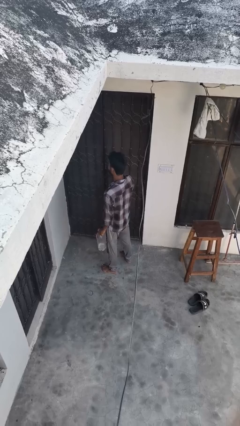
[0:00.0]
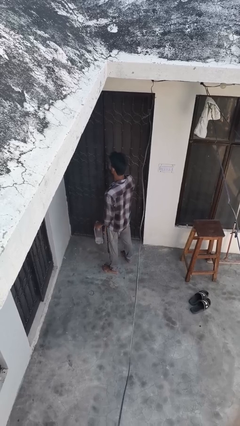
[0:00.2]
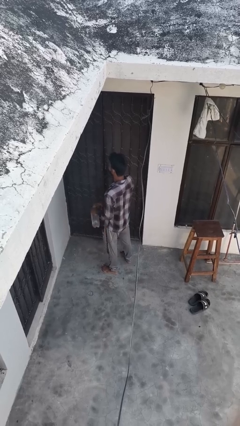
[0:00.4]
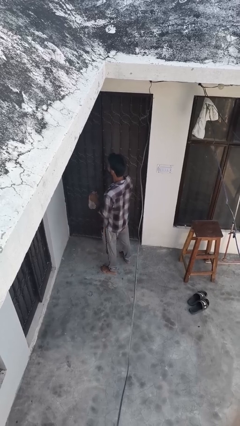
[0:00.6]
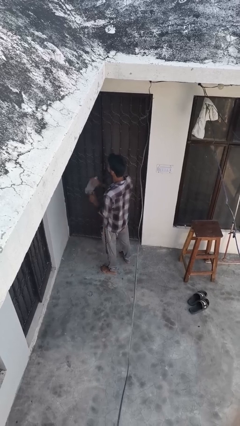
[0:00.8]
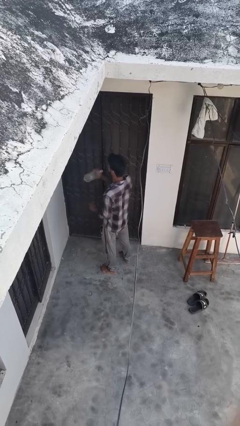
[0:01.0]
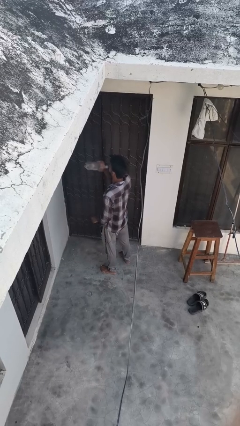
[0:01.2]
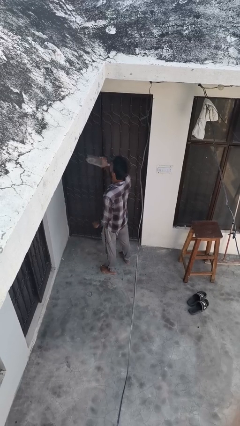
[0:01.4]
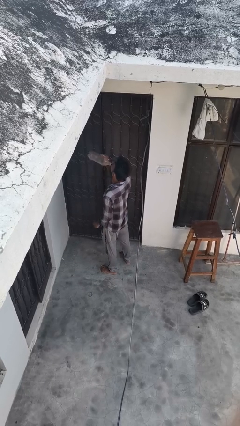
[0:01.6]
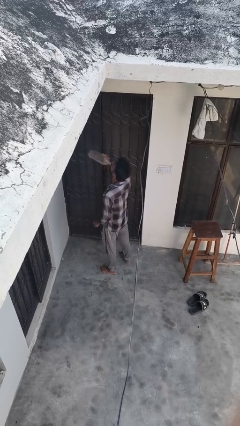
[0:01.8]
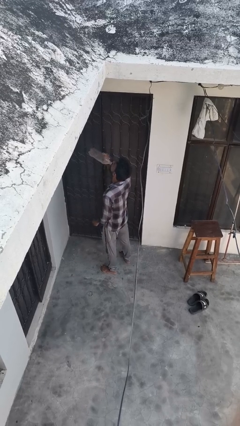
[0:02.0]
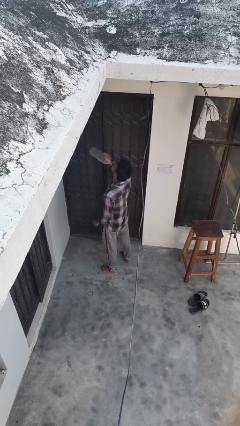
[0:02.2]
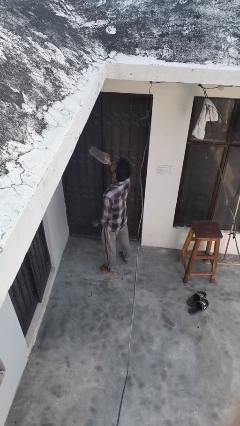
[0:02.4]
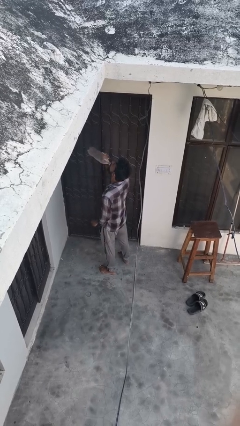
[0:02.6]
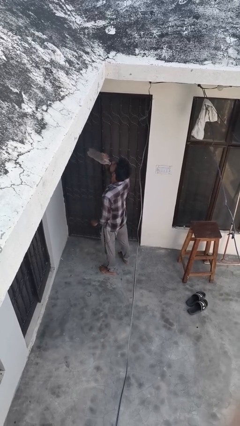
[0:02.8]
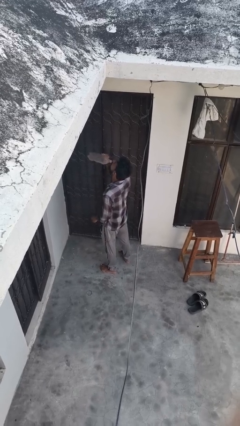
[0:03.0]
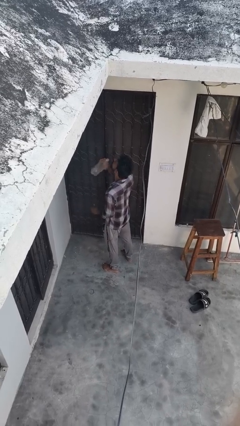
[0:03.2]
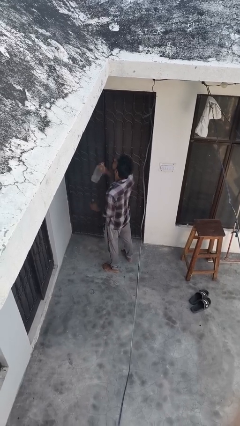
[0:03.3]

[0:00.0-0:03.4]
person drinks from bottle

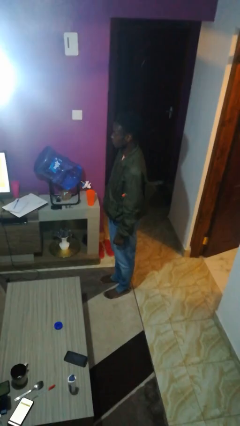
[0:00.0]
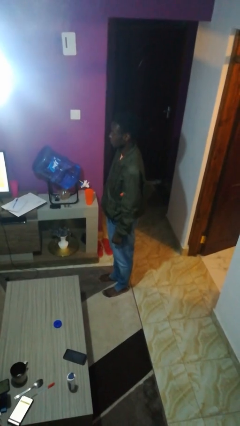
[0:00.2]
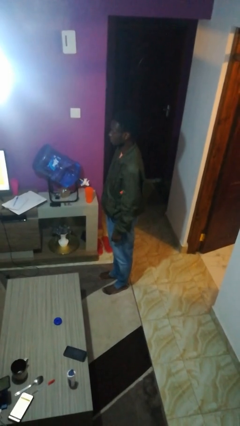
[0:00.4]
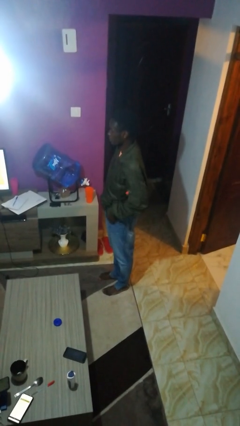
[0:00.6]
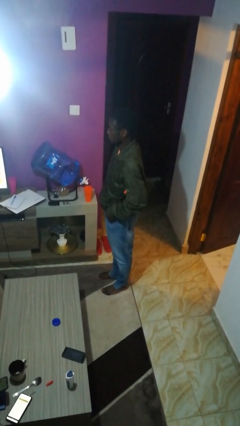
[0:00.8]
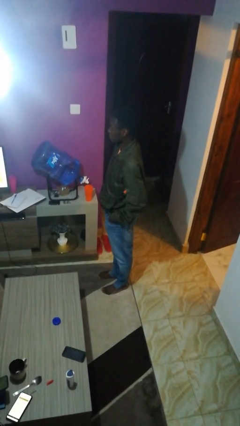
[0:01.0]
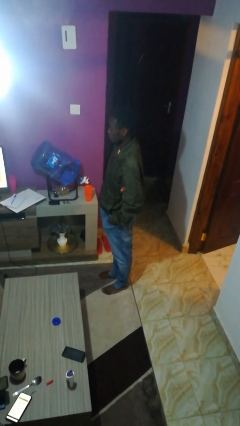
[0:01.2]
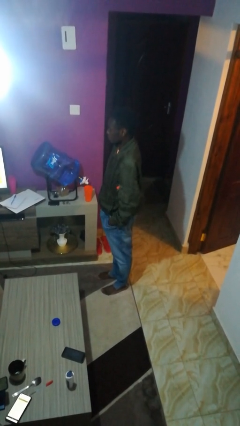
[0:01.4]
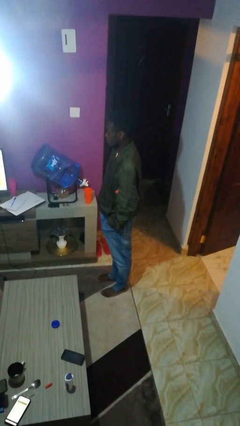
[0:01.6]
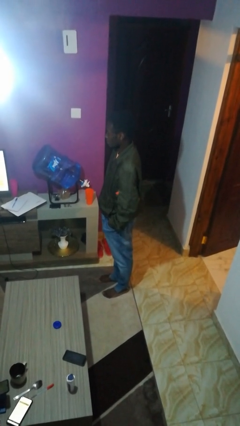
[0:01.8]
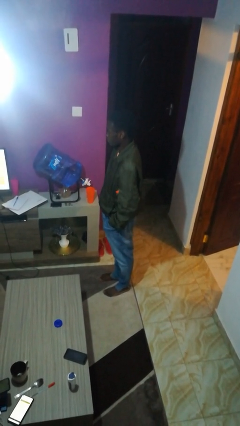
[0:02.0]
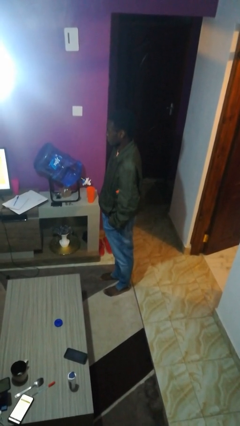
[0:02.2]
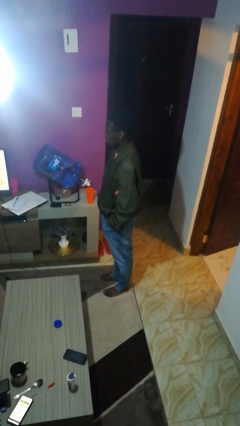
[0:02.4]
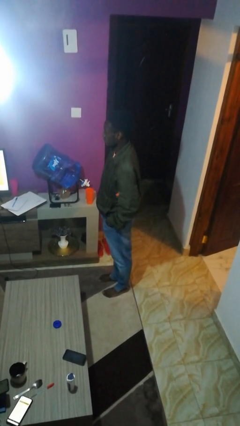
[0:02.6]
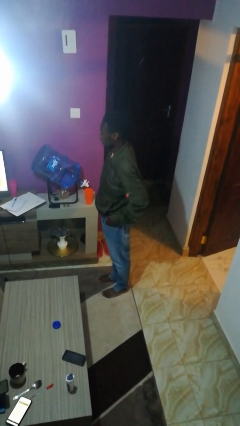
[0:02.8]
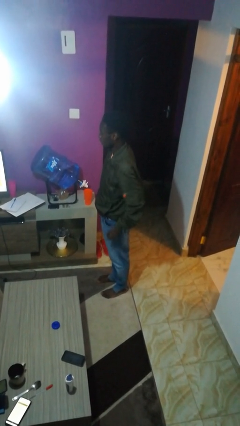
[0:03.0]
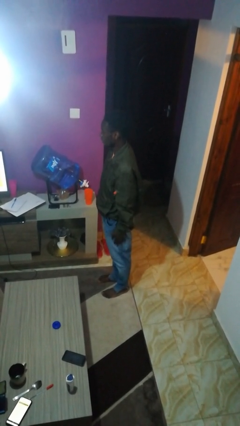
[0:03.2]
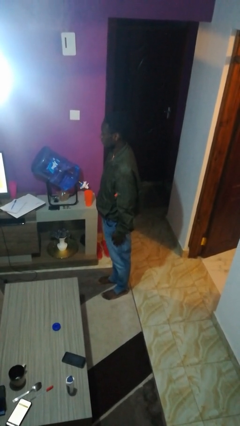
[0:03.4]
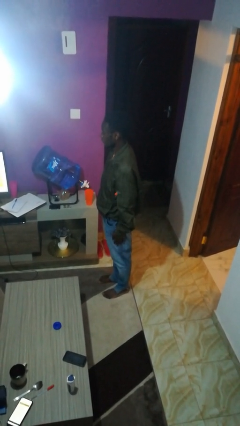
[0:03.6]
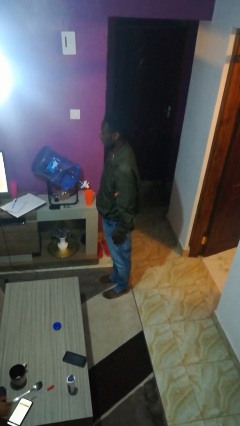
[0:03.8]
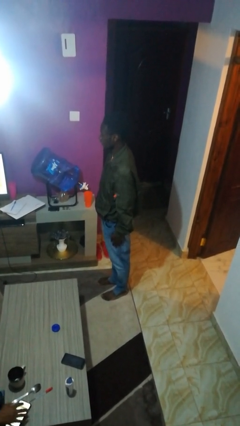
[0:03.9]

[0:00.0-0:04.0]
person puts hands in back pockets

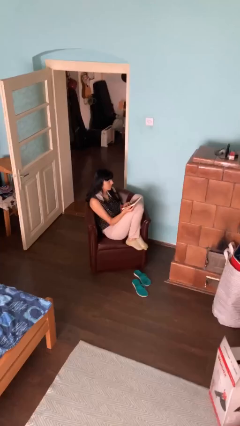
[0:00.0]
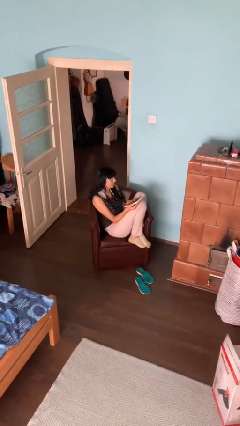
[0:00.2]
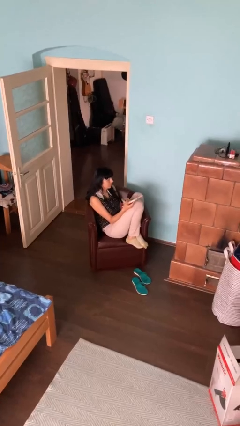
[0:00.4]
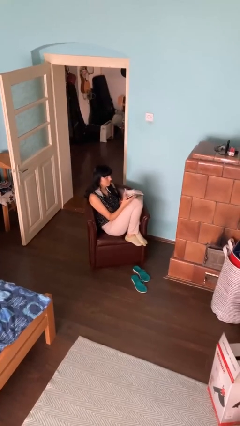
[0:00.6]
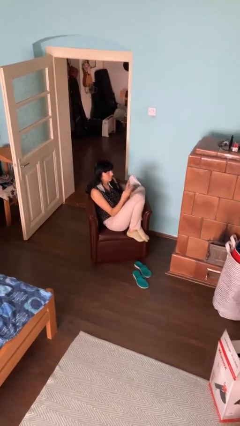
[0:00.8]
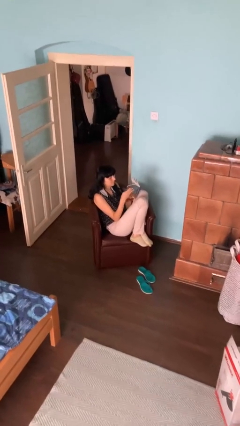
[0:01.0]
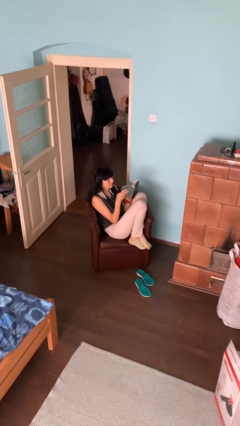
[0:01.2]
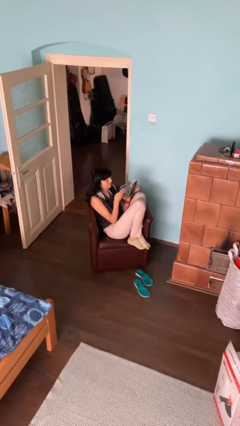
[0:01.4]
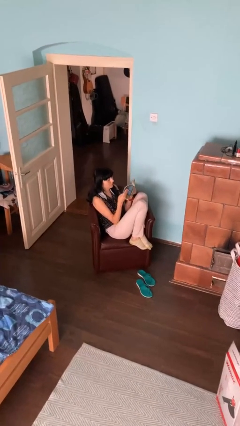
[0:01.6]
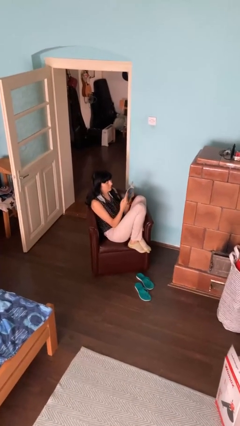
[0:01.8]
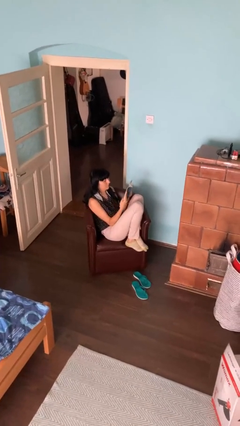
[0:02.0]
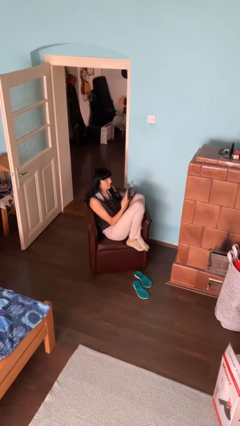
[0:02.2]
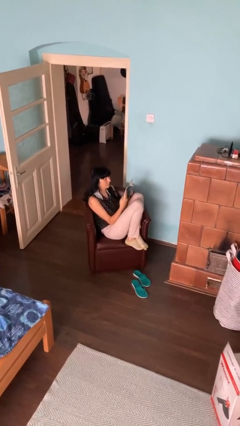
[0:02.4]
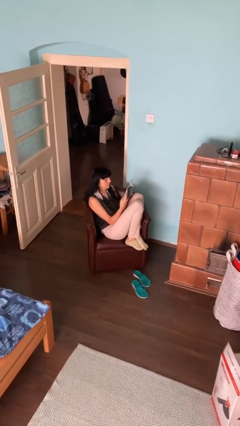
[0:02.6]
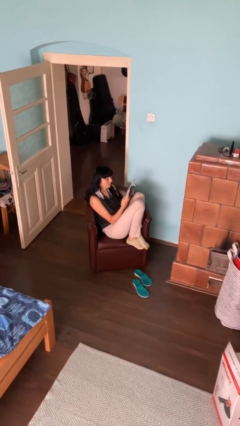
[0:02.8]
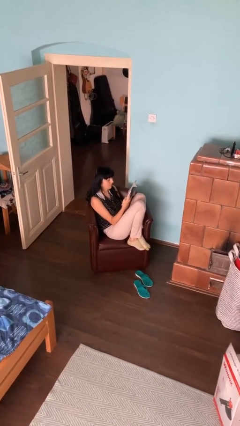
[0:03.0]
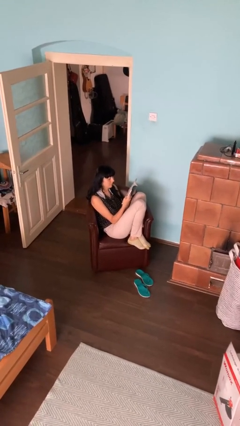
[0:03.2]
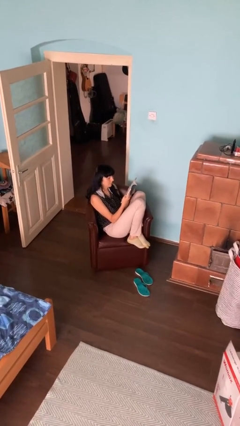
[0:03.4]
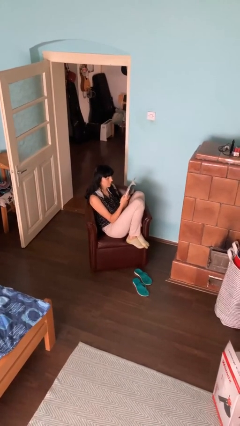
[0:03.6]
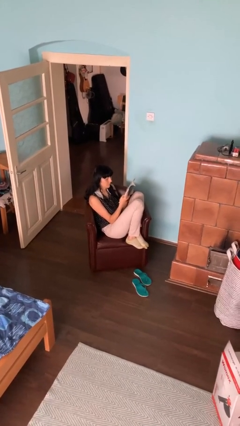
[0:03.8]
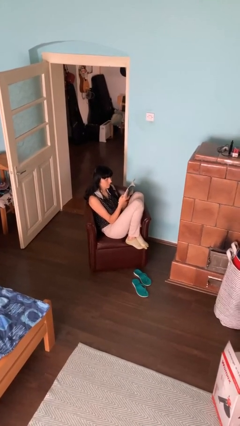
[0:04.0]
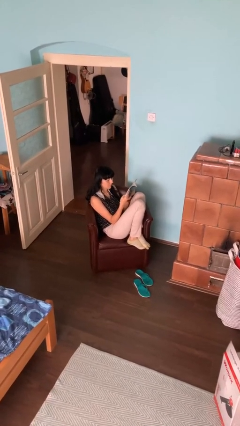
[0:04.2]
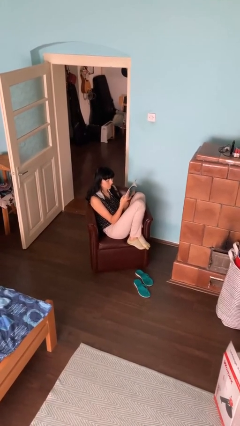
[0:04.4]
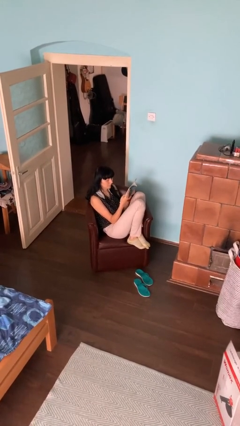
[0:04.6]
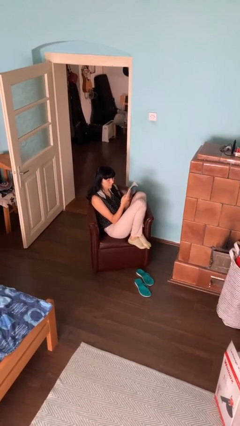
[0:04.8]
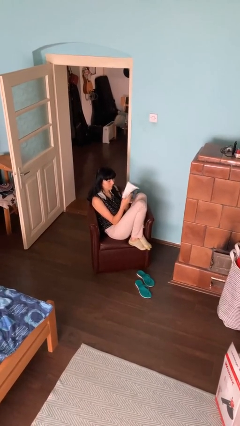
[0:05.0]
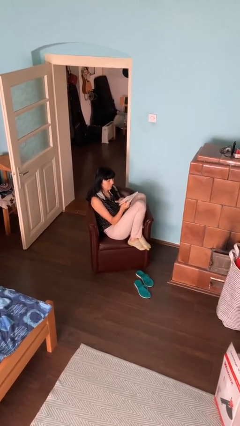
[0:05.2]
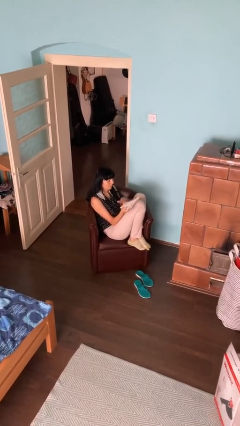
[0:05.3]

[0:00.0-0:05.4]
person reads book

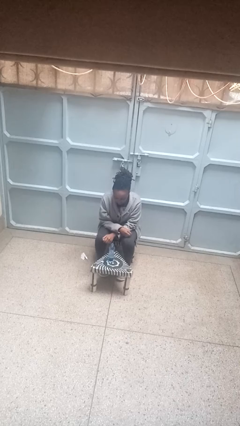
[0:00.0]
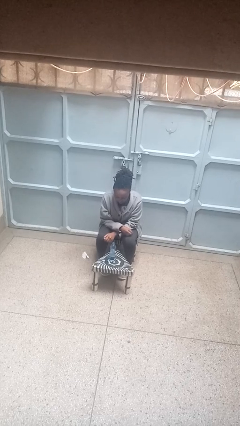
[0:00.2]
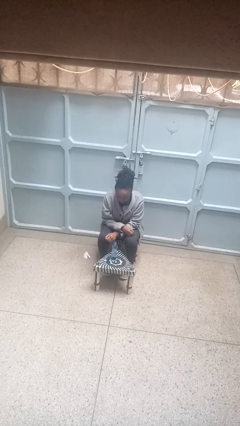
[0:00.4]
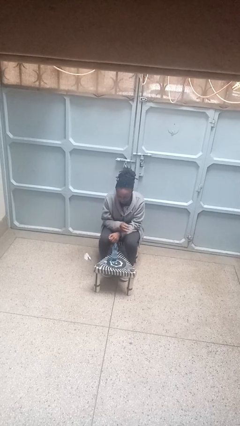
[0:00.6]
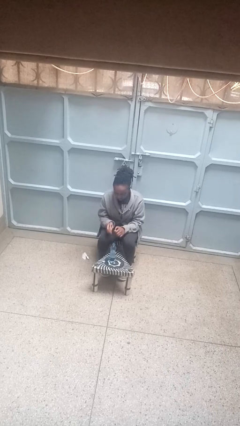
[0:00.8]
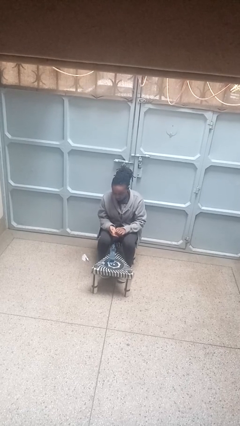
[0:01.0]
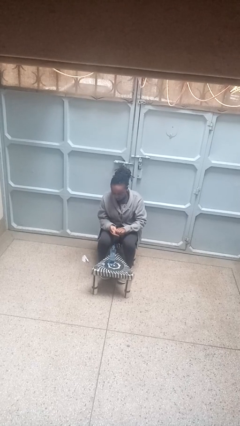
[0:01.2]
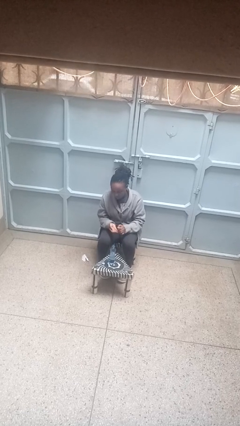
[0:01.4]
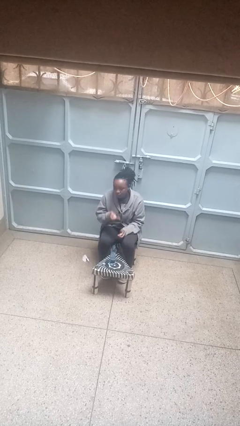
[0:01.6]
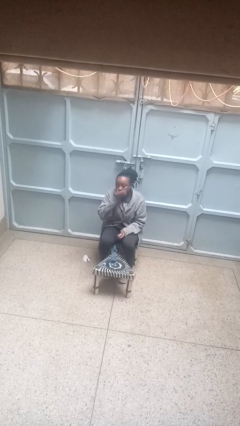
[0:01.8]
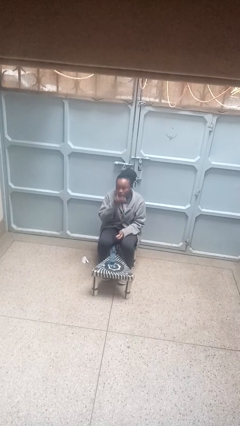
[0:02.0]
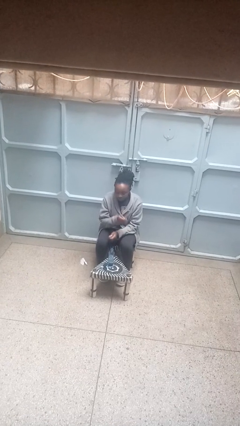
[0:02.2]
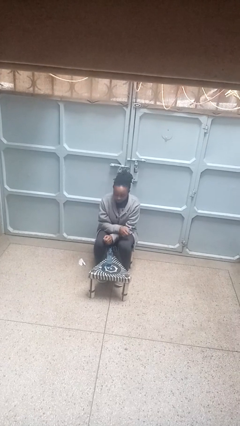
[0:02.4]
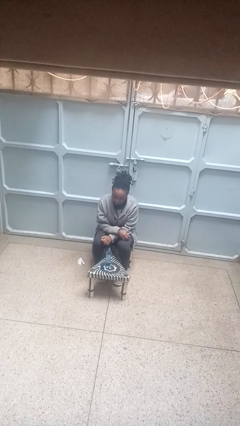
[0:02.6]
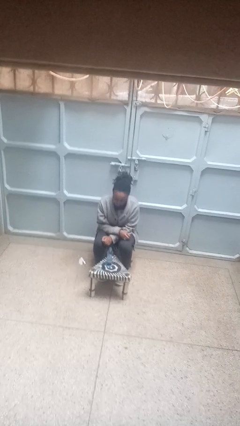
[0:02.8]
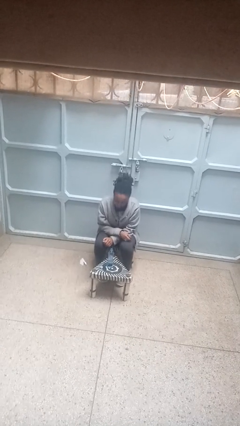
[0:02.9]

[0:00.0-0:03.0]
person takes medicine pills

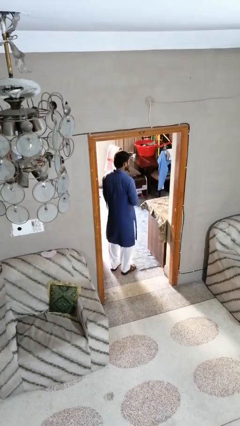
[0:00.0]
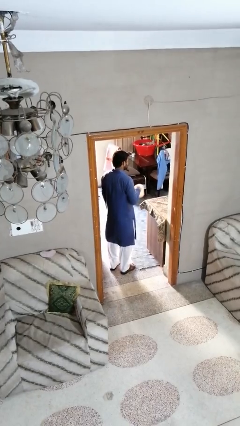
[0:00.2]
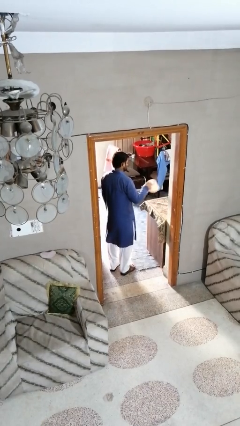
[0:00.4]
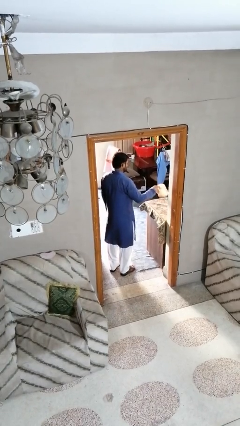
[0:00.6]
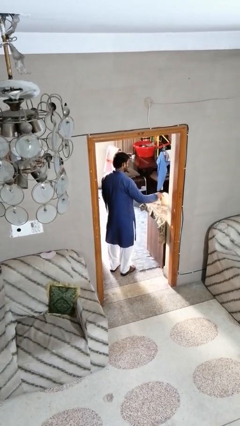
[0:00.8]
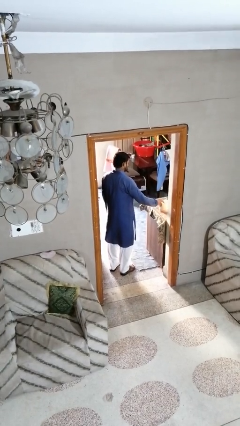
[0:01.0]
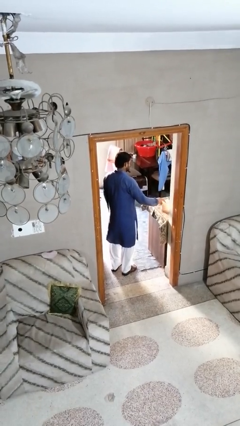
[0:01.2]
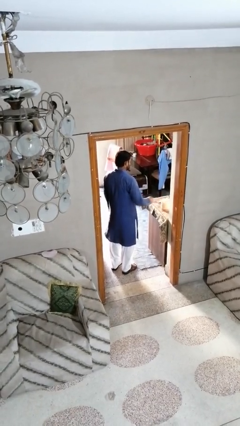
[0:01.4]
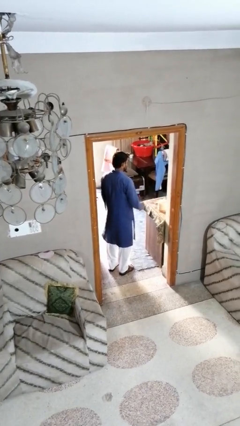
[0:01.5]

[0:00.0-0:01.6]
person puts down object on countertop
